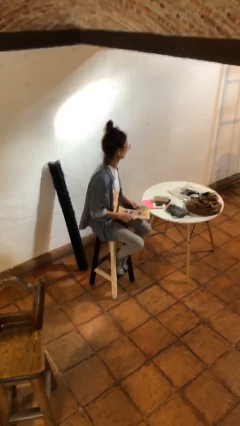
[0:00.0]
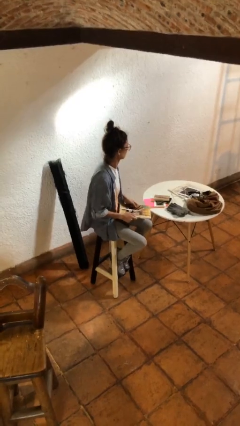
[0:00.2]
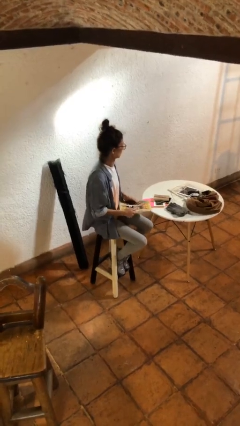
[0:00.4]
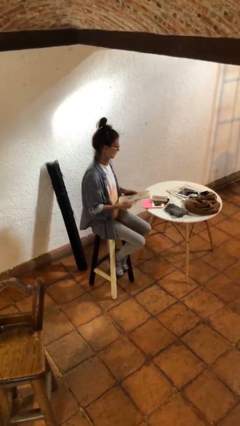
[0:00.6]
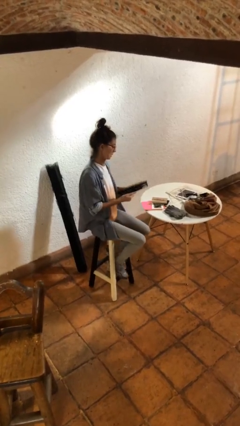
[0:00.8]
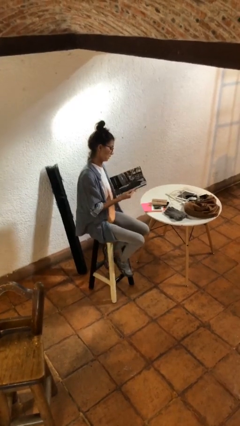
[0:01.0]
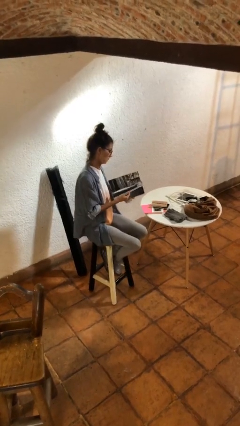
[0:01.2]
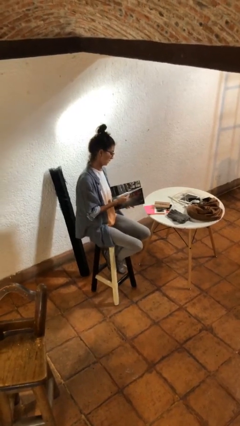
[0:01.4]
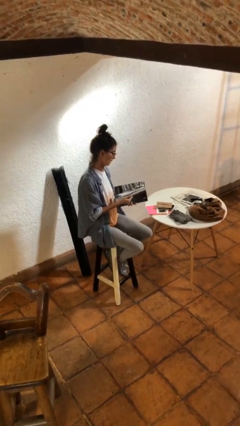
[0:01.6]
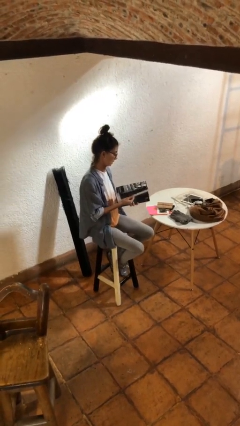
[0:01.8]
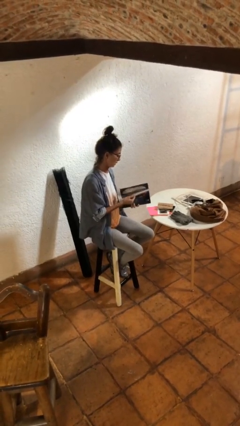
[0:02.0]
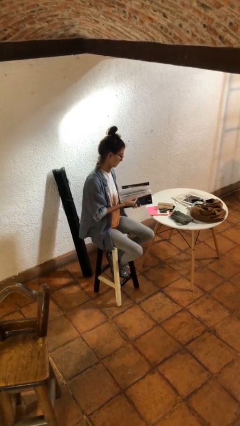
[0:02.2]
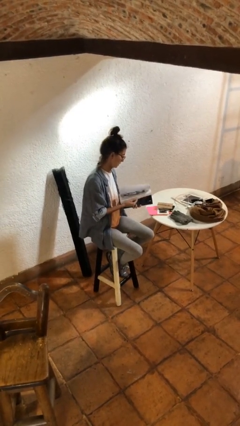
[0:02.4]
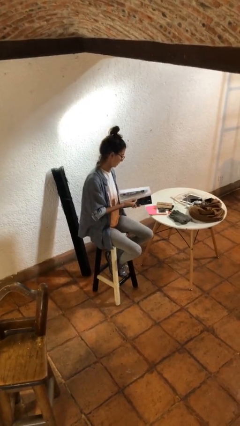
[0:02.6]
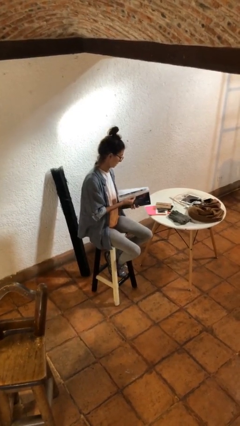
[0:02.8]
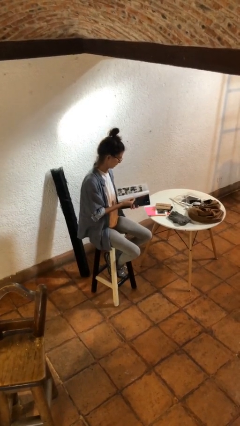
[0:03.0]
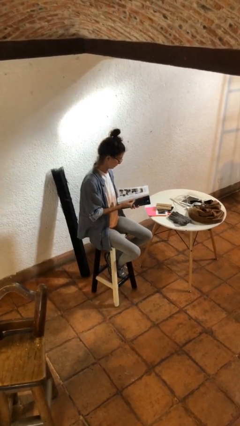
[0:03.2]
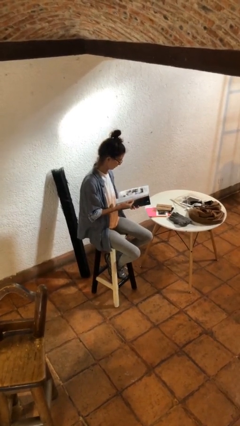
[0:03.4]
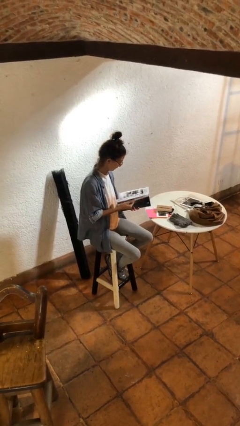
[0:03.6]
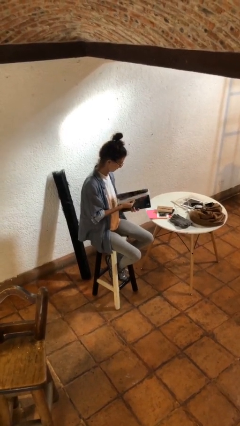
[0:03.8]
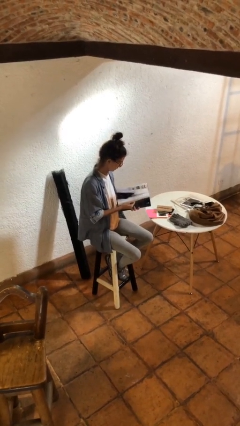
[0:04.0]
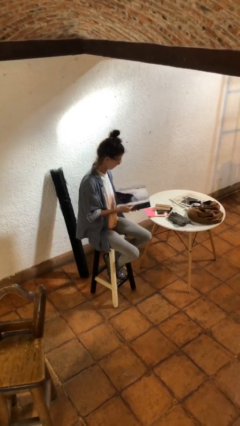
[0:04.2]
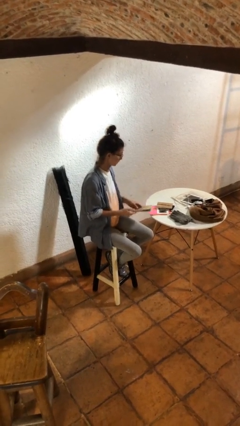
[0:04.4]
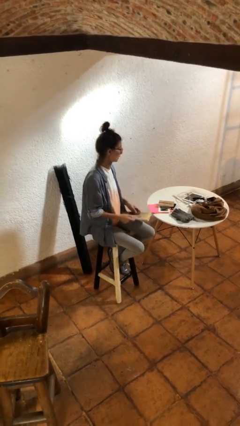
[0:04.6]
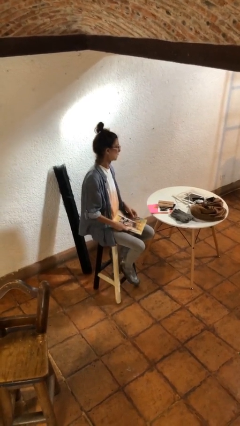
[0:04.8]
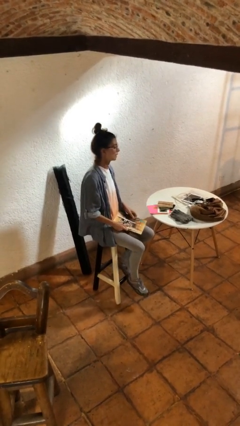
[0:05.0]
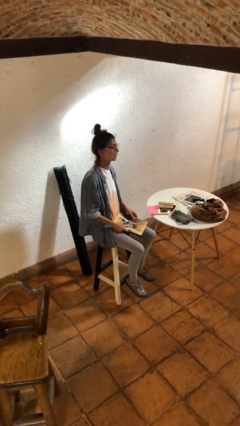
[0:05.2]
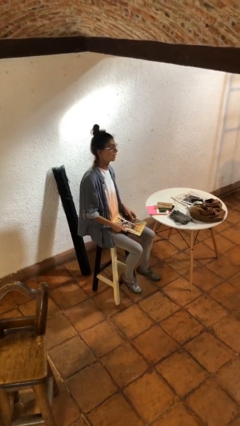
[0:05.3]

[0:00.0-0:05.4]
person reads magazine

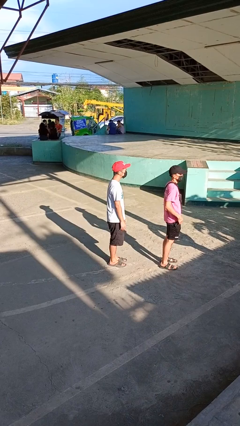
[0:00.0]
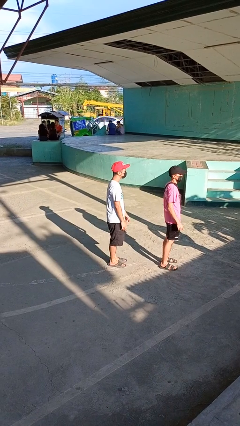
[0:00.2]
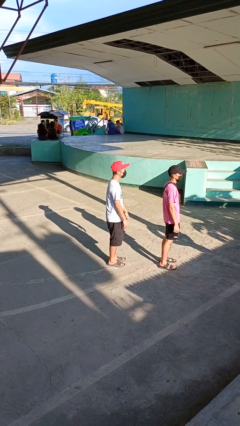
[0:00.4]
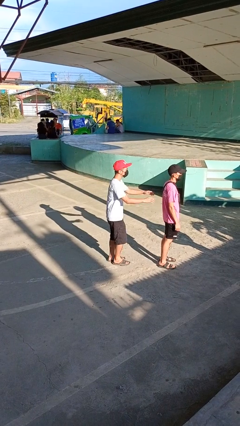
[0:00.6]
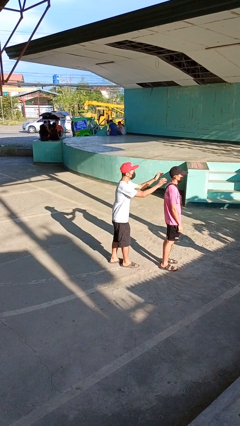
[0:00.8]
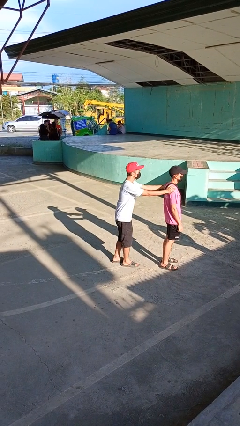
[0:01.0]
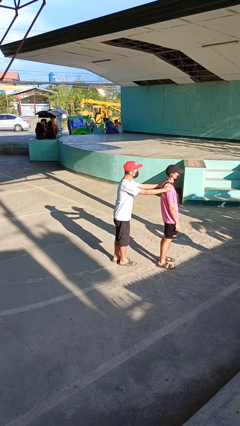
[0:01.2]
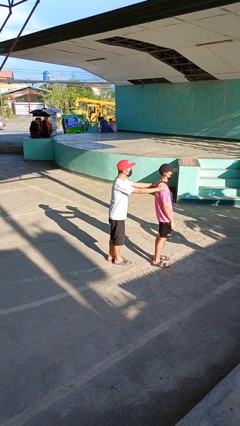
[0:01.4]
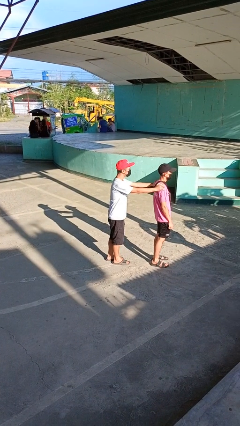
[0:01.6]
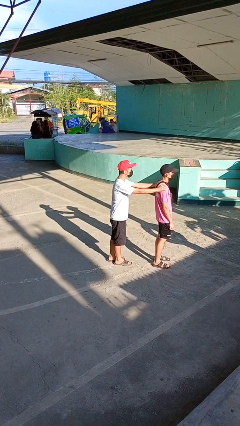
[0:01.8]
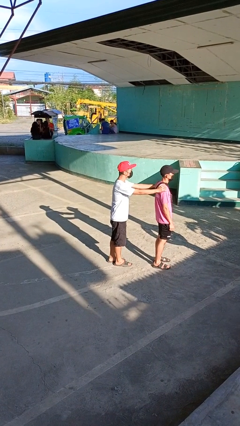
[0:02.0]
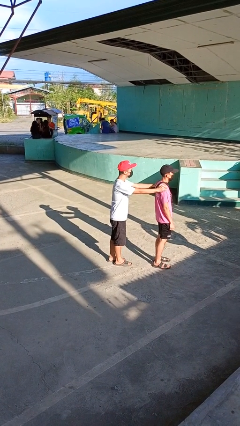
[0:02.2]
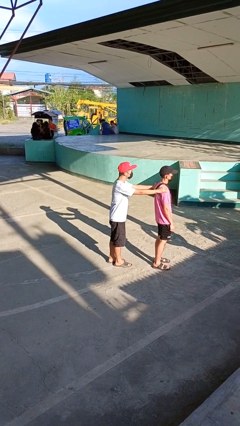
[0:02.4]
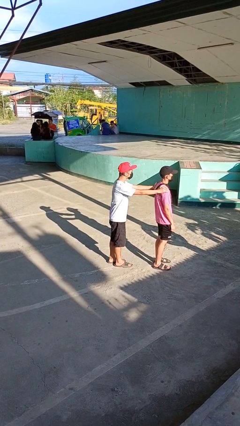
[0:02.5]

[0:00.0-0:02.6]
person grabs person by shoulder

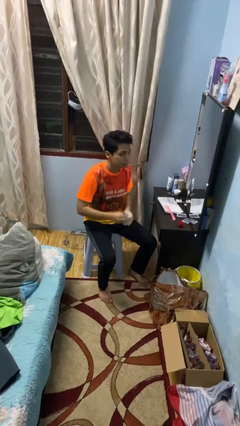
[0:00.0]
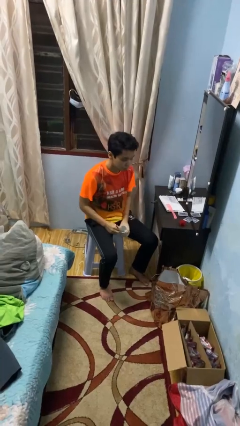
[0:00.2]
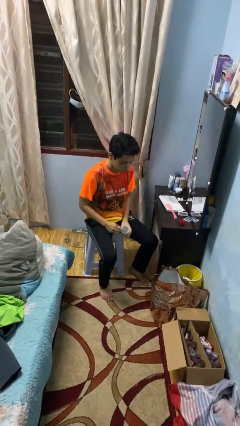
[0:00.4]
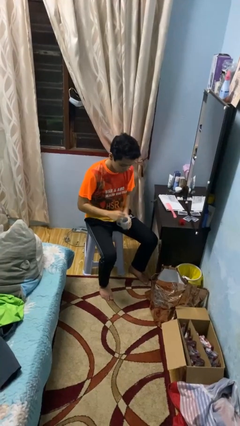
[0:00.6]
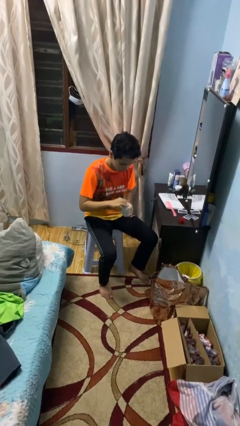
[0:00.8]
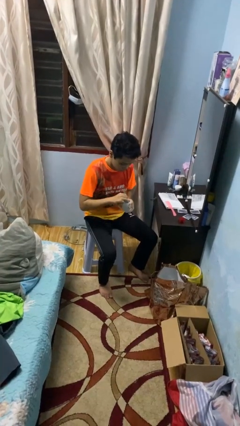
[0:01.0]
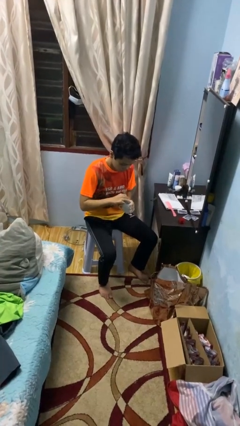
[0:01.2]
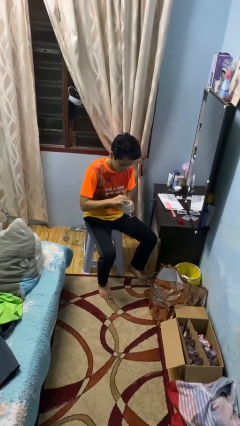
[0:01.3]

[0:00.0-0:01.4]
person stirs mug

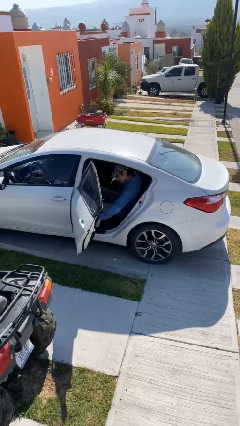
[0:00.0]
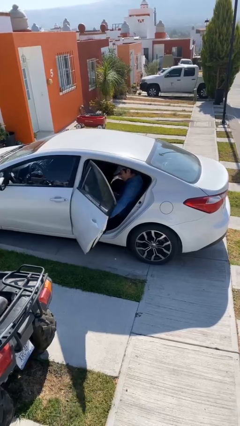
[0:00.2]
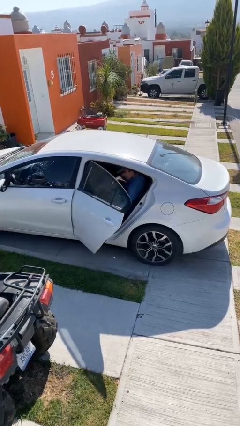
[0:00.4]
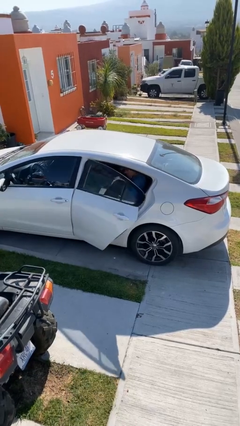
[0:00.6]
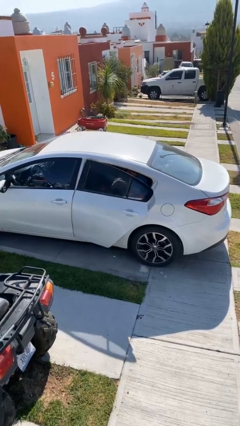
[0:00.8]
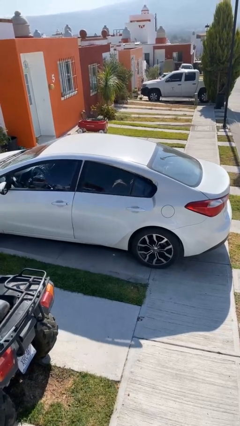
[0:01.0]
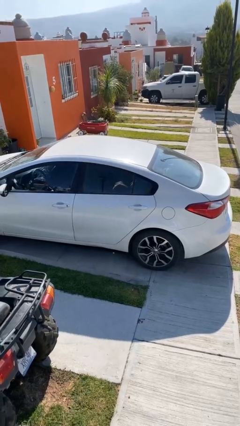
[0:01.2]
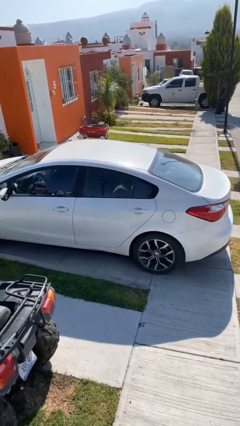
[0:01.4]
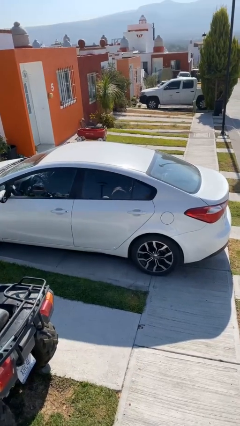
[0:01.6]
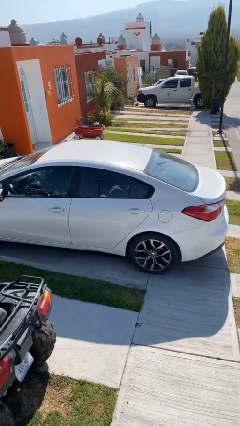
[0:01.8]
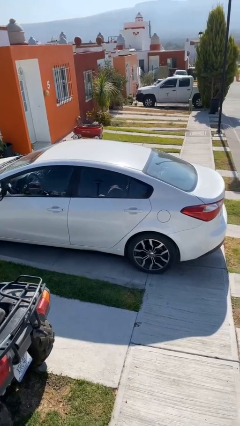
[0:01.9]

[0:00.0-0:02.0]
person closes car door

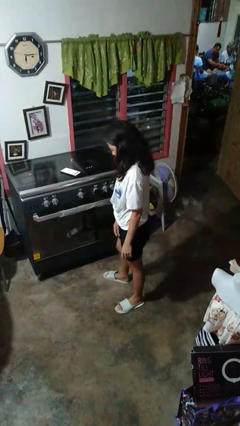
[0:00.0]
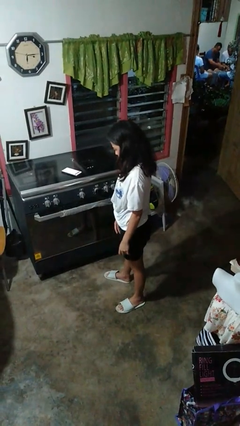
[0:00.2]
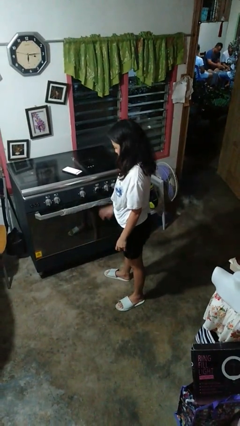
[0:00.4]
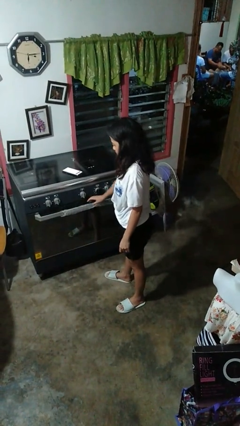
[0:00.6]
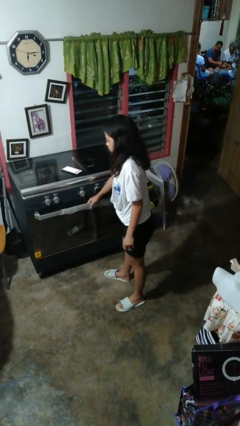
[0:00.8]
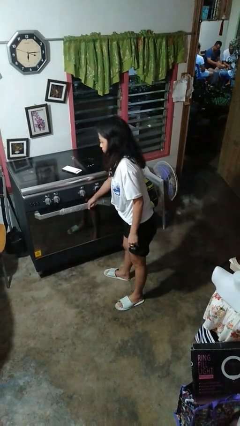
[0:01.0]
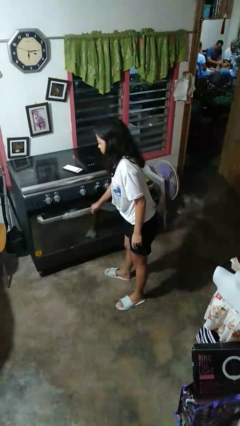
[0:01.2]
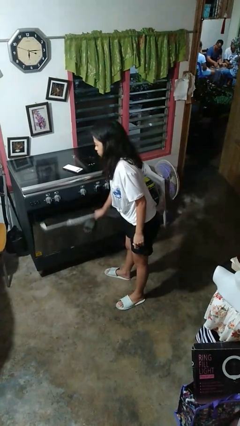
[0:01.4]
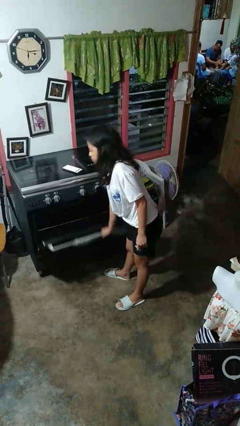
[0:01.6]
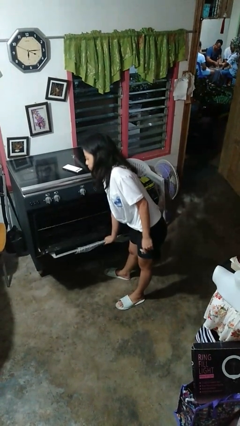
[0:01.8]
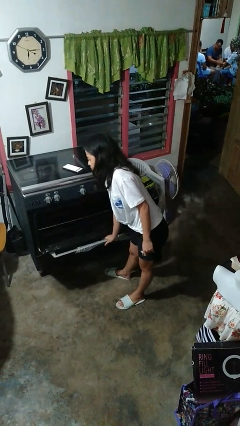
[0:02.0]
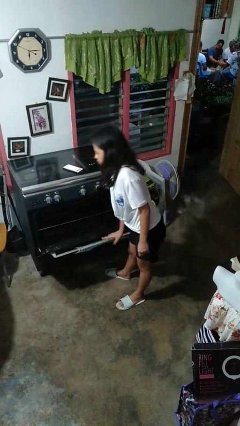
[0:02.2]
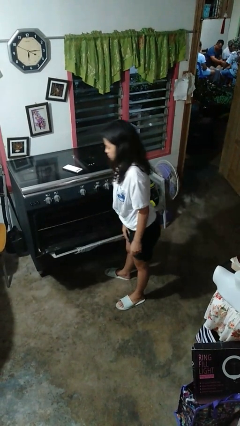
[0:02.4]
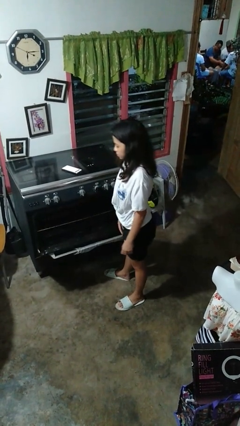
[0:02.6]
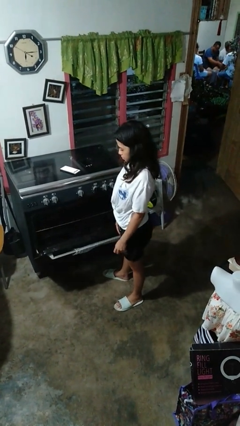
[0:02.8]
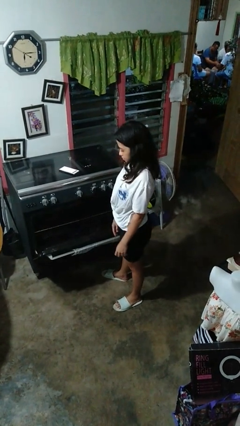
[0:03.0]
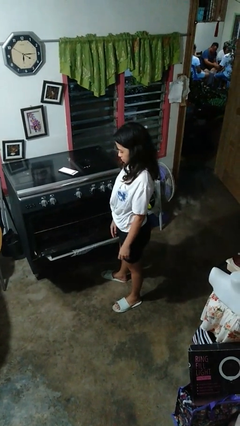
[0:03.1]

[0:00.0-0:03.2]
person opens oven door

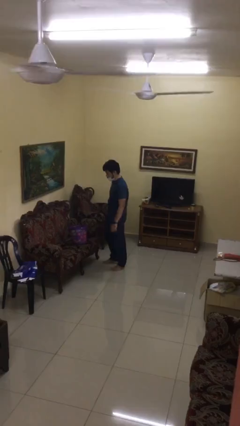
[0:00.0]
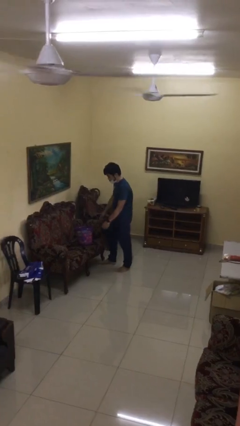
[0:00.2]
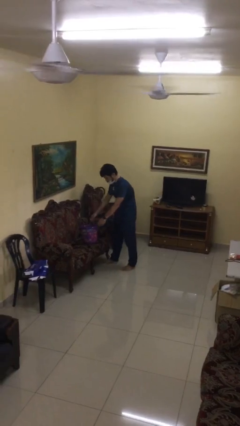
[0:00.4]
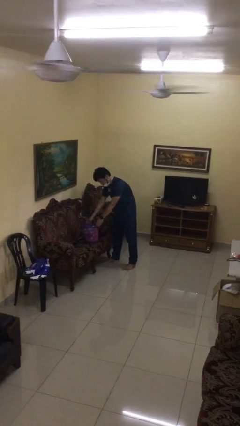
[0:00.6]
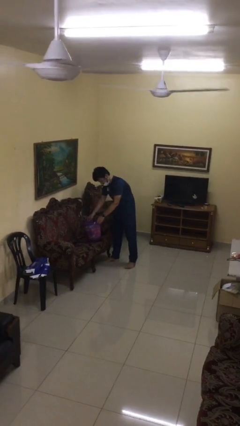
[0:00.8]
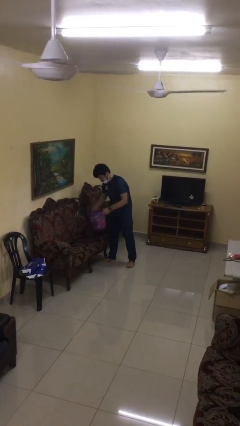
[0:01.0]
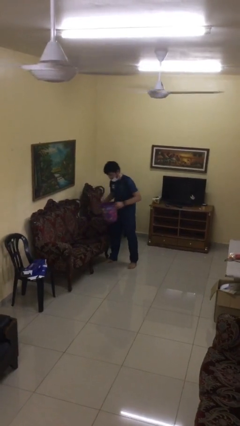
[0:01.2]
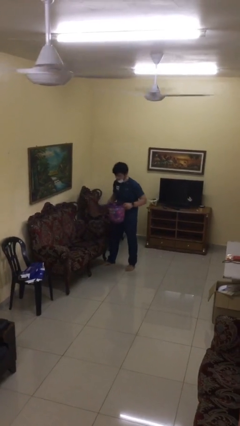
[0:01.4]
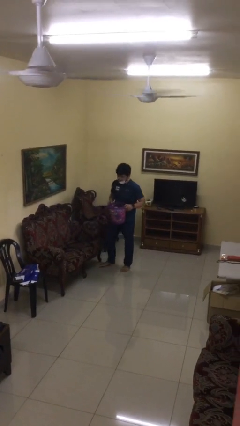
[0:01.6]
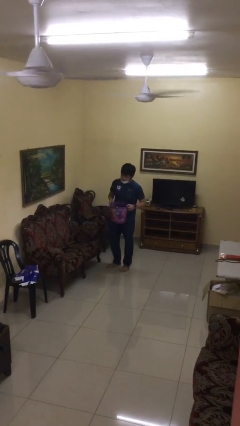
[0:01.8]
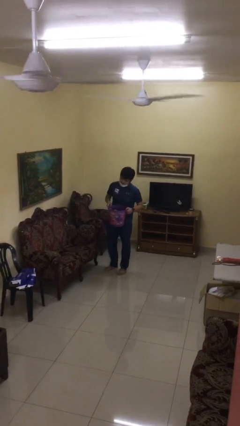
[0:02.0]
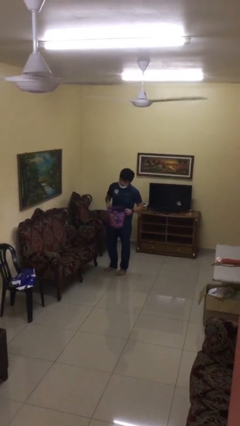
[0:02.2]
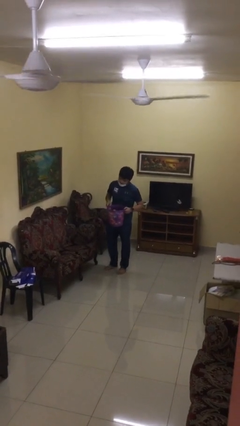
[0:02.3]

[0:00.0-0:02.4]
person picks up object from couch

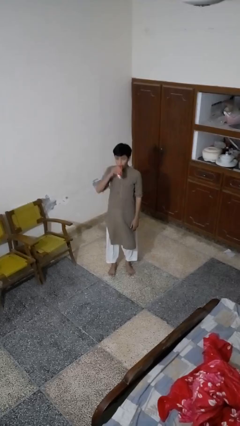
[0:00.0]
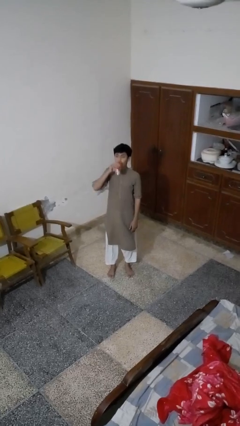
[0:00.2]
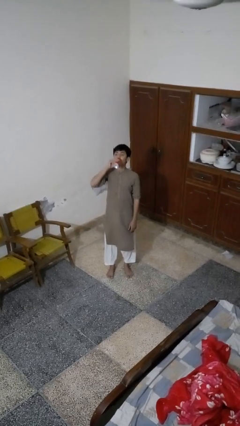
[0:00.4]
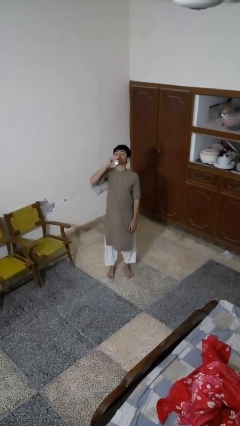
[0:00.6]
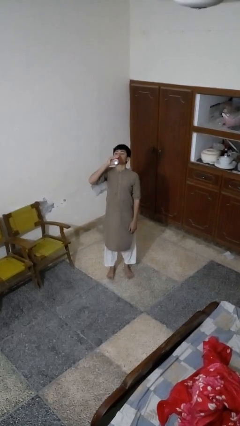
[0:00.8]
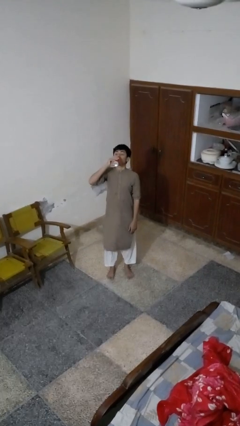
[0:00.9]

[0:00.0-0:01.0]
person drinks from beverage can
